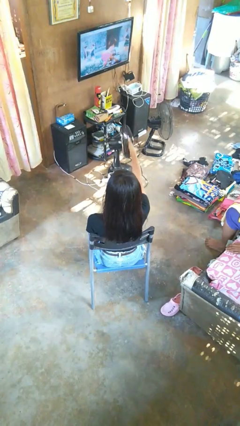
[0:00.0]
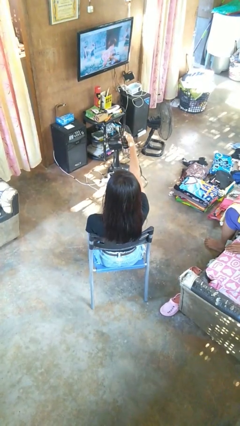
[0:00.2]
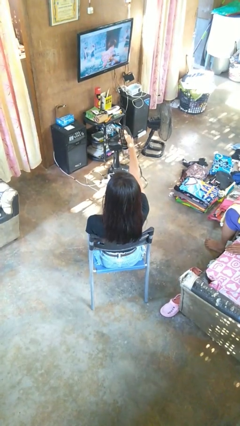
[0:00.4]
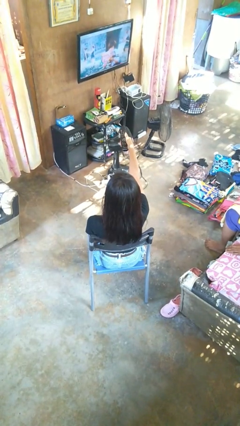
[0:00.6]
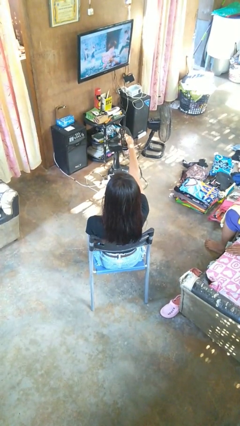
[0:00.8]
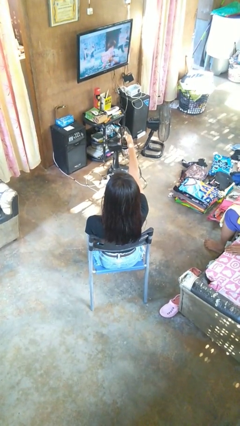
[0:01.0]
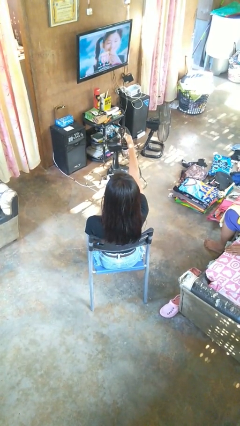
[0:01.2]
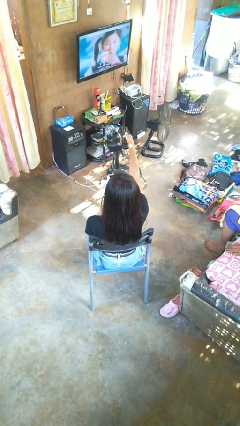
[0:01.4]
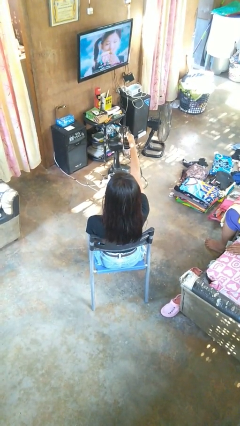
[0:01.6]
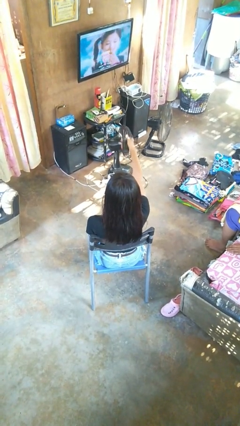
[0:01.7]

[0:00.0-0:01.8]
person uses television remote

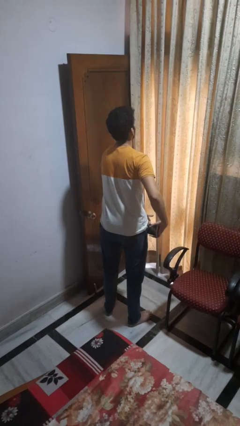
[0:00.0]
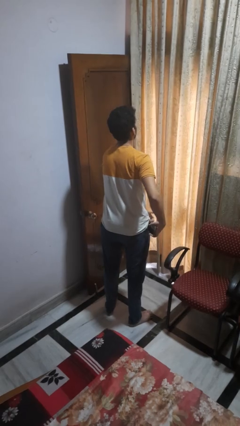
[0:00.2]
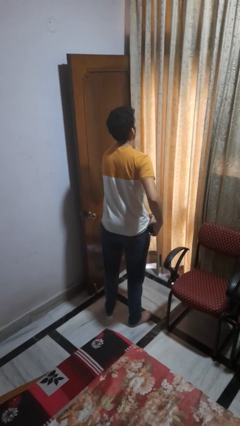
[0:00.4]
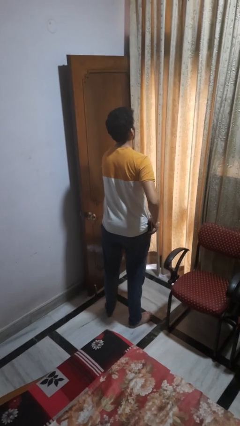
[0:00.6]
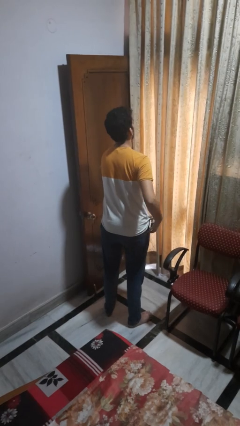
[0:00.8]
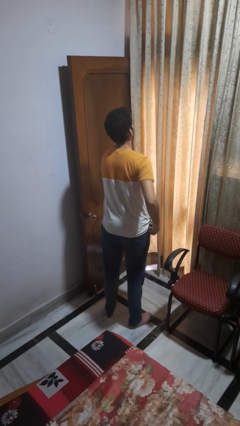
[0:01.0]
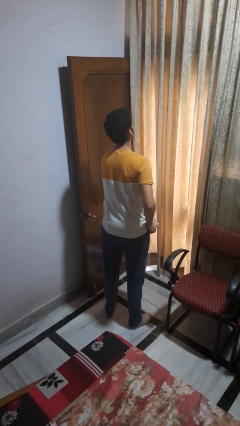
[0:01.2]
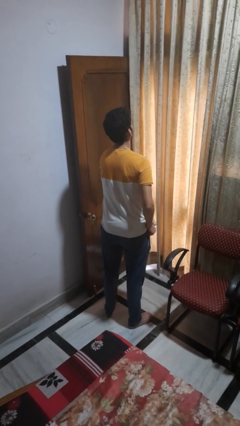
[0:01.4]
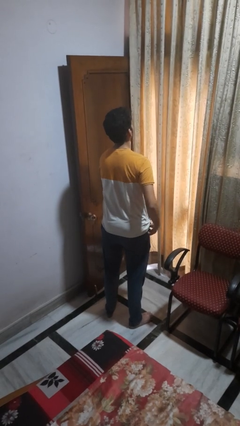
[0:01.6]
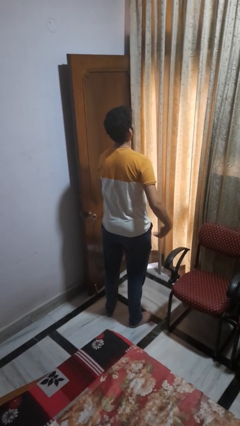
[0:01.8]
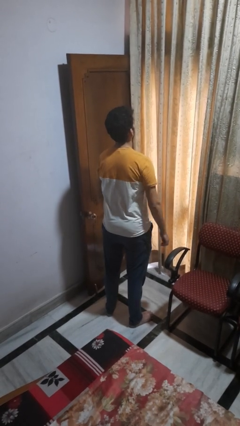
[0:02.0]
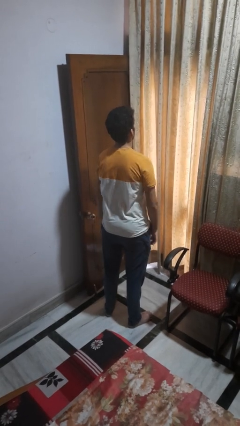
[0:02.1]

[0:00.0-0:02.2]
person puts phone into pocket

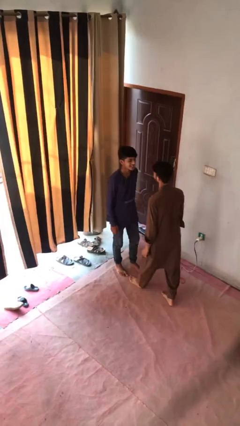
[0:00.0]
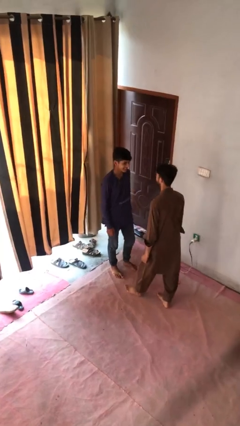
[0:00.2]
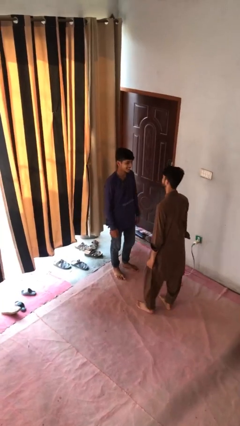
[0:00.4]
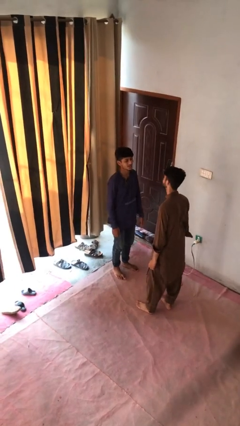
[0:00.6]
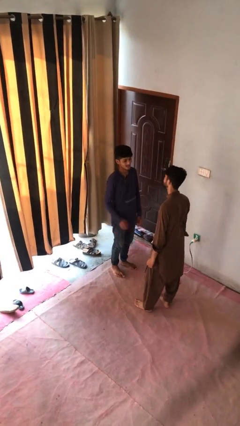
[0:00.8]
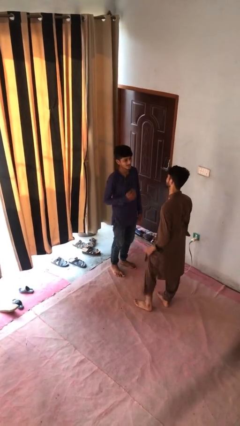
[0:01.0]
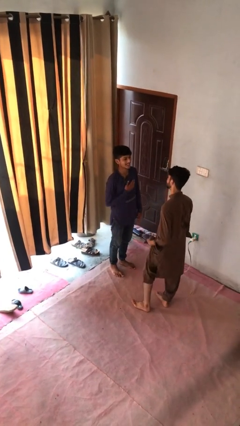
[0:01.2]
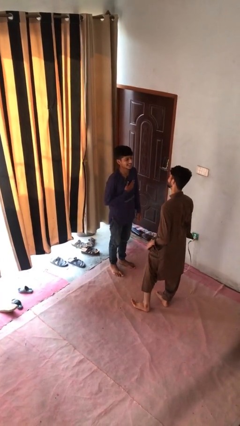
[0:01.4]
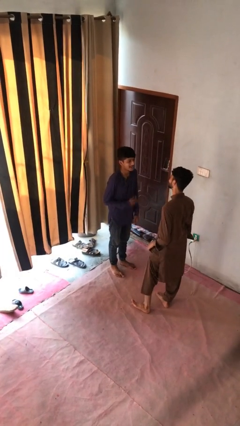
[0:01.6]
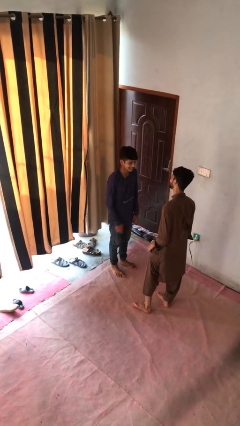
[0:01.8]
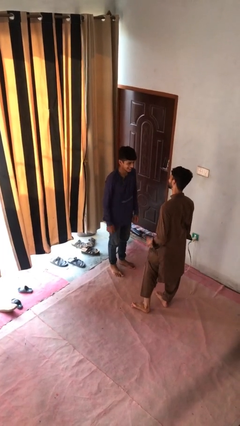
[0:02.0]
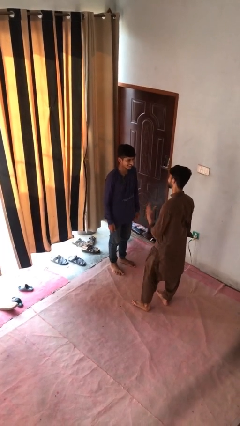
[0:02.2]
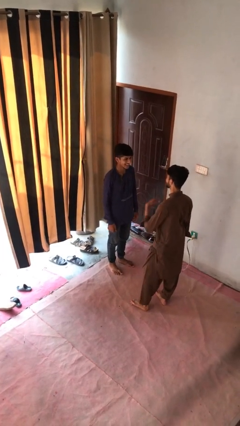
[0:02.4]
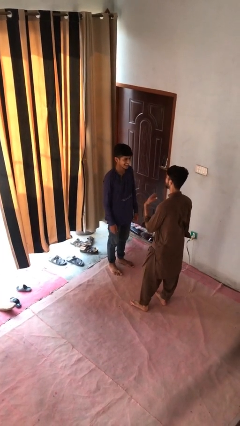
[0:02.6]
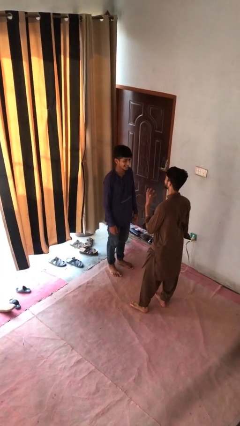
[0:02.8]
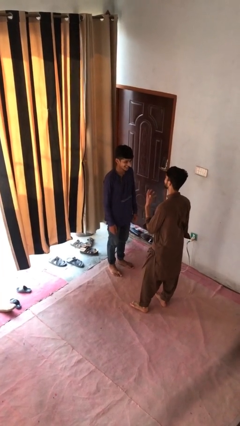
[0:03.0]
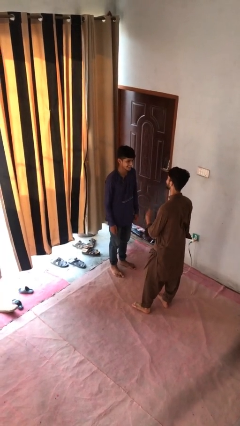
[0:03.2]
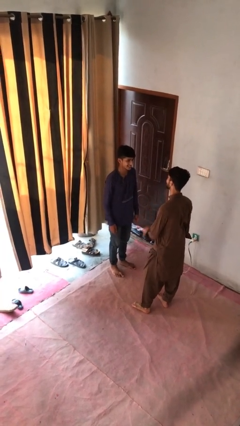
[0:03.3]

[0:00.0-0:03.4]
person talks to person

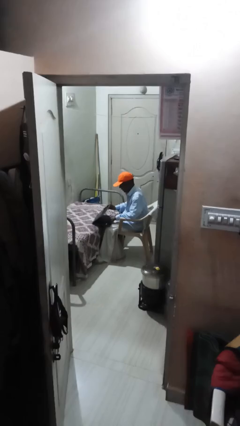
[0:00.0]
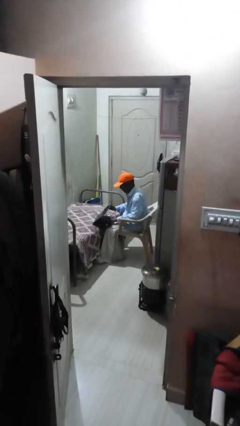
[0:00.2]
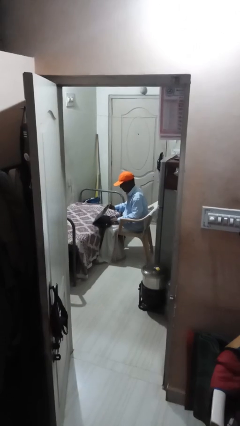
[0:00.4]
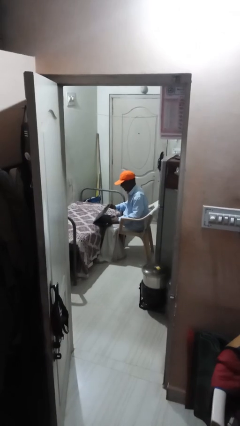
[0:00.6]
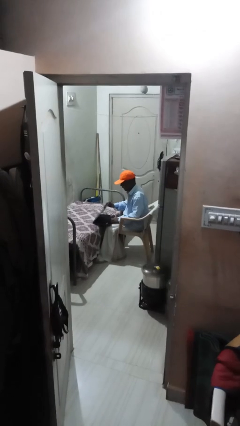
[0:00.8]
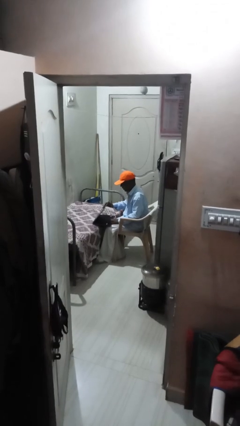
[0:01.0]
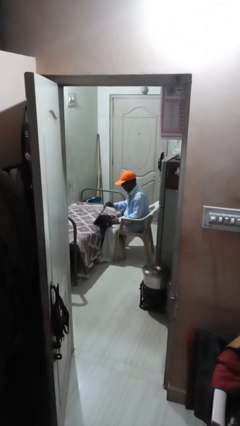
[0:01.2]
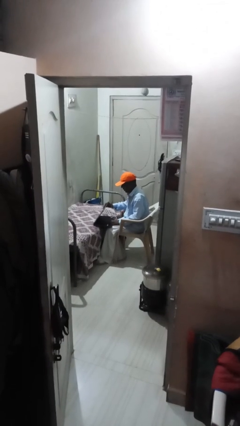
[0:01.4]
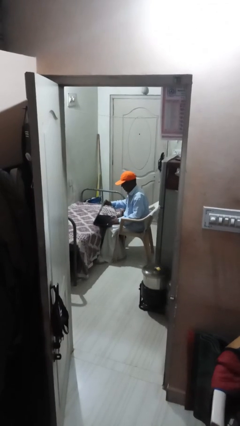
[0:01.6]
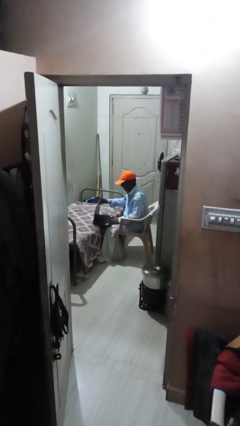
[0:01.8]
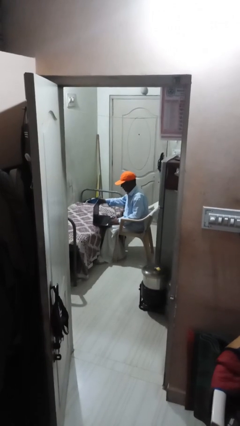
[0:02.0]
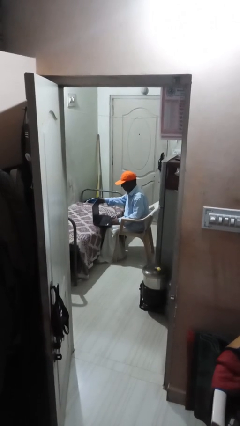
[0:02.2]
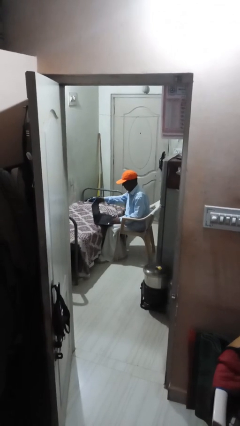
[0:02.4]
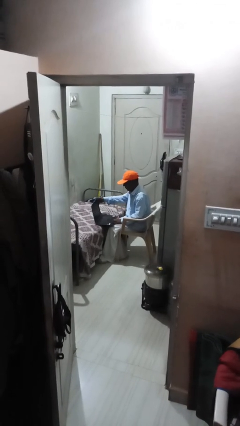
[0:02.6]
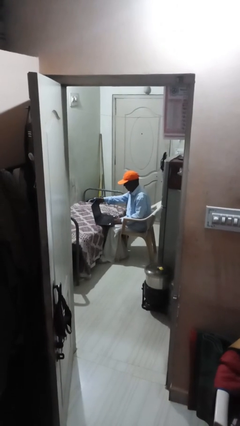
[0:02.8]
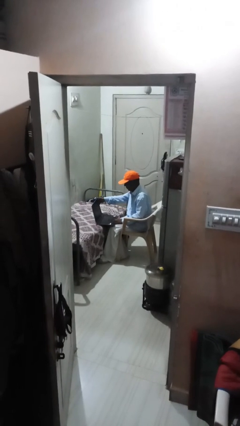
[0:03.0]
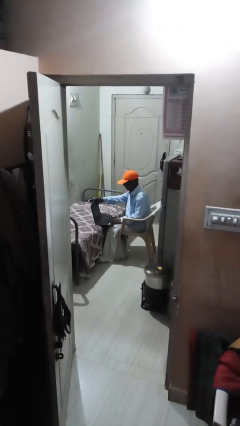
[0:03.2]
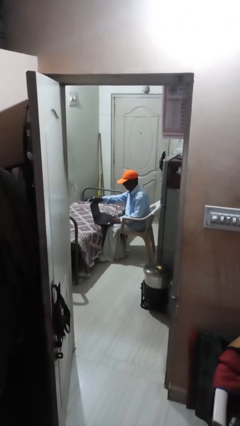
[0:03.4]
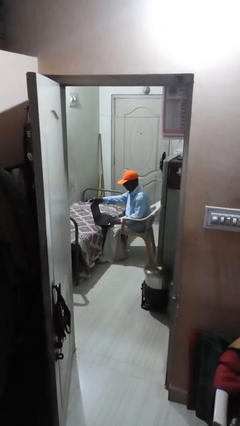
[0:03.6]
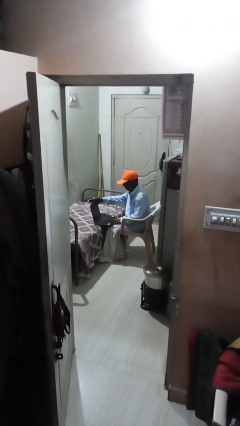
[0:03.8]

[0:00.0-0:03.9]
person interacts with laptop

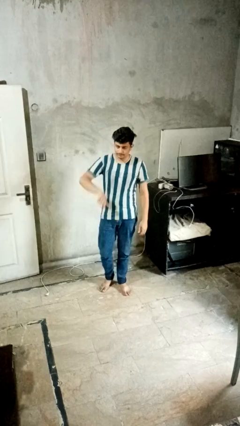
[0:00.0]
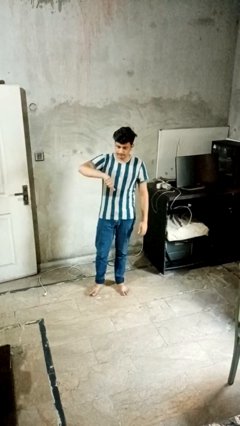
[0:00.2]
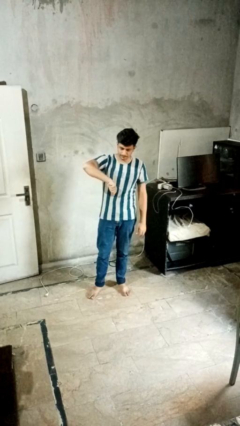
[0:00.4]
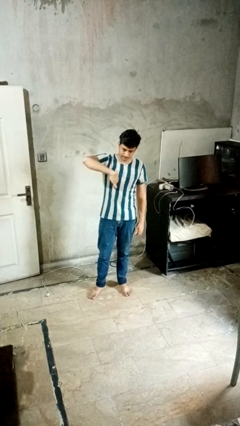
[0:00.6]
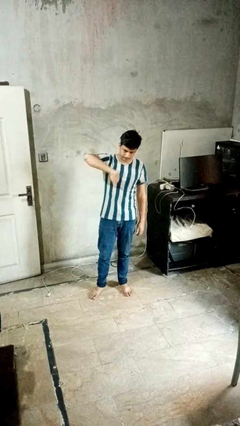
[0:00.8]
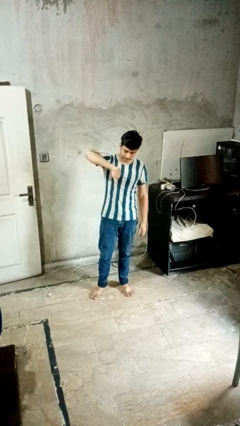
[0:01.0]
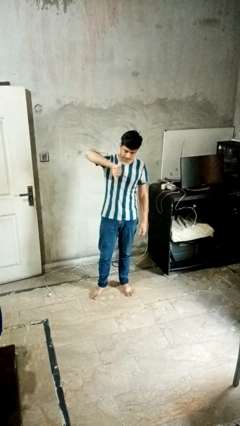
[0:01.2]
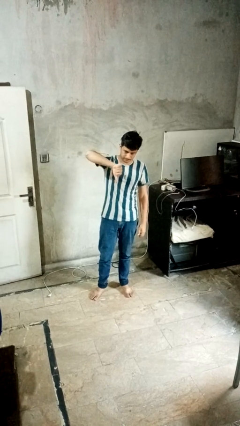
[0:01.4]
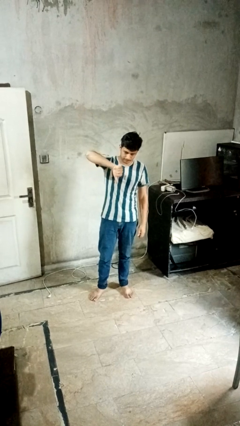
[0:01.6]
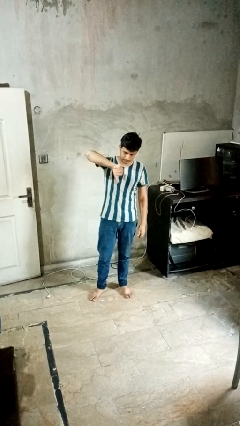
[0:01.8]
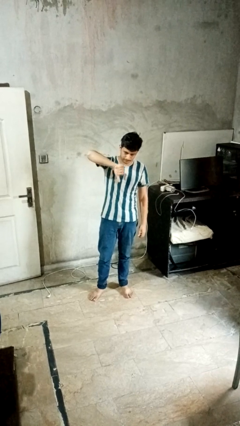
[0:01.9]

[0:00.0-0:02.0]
person gestures thumbs down

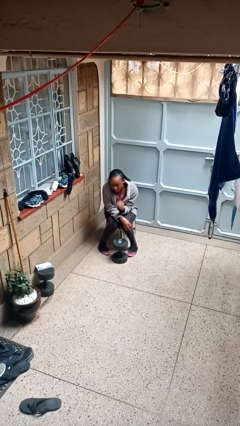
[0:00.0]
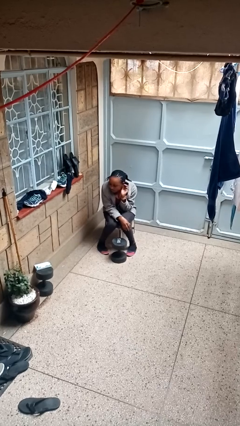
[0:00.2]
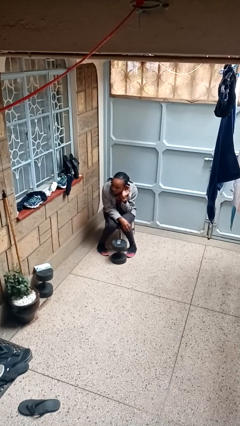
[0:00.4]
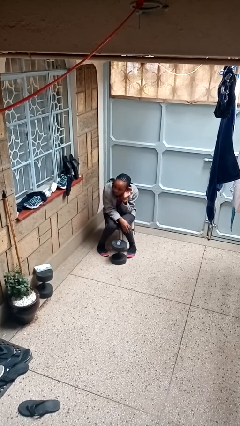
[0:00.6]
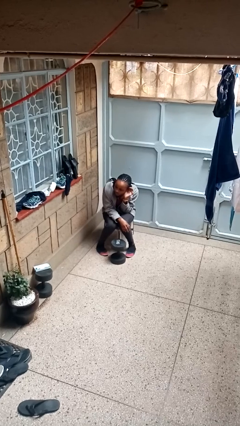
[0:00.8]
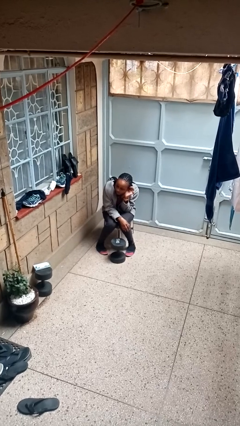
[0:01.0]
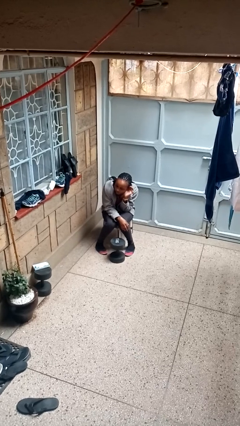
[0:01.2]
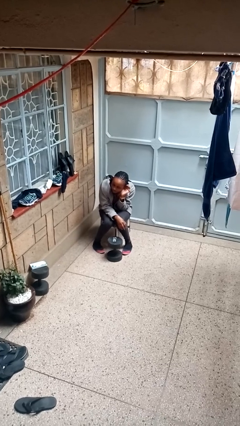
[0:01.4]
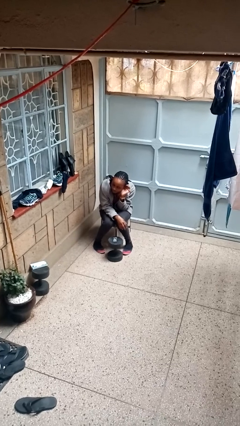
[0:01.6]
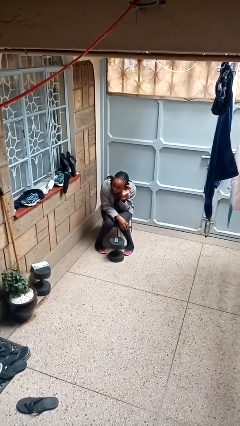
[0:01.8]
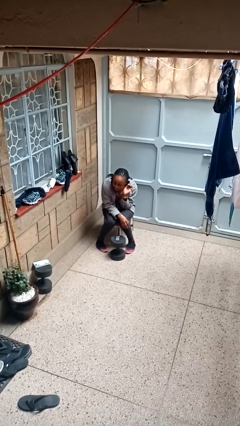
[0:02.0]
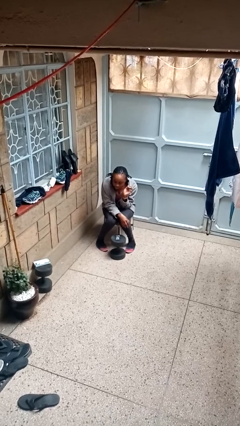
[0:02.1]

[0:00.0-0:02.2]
person gestures listen closely

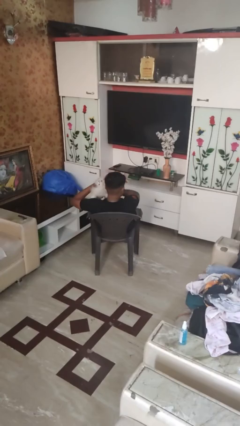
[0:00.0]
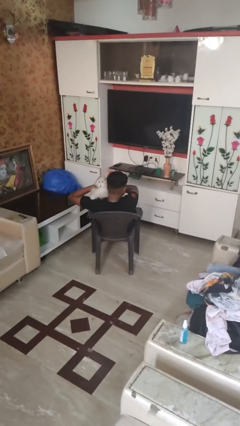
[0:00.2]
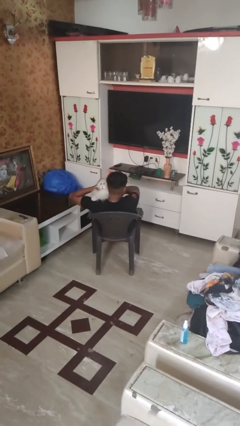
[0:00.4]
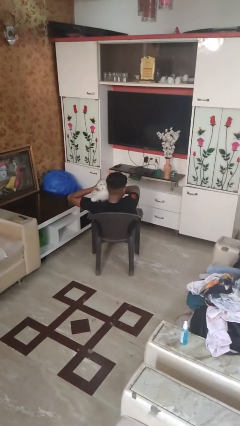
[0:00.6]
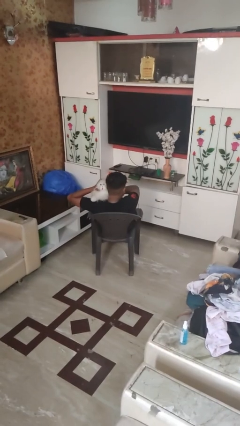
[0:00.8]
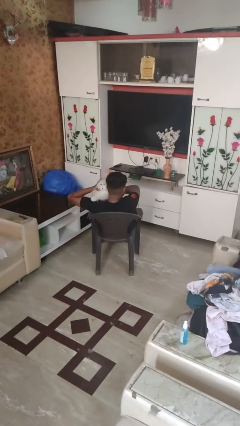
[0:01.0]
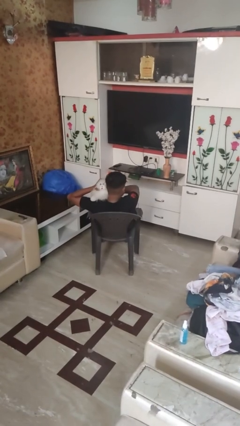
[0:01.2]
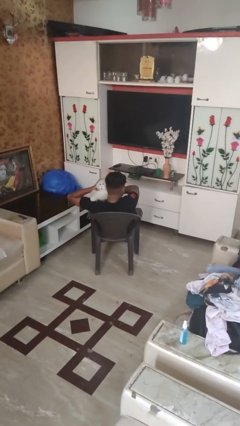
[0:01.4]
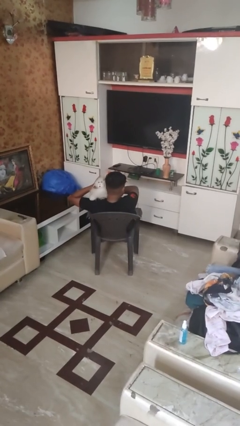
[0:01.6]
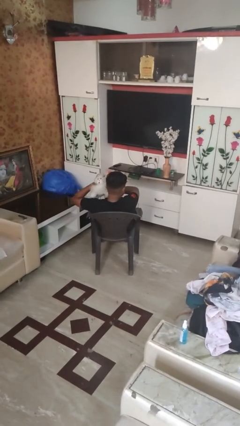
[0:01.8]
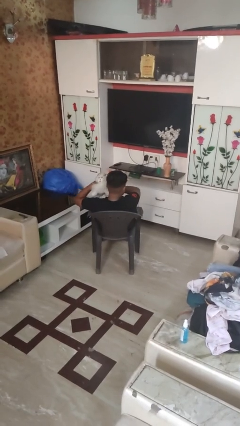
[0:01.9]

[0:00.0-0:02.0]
person hugs stuffed animal
